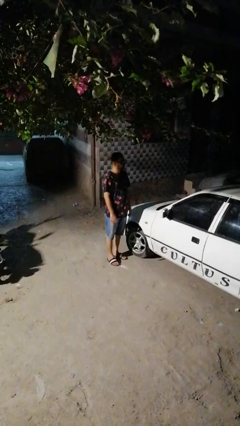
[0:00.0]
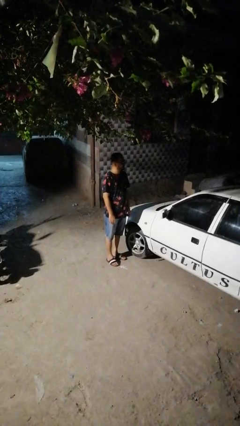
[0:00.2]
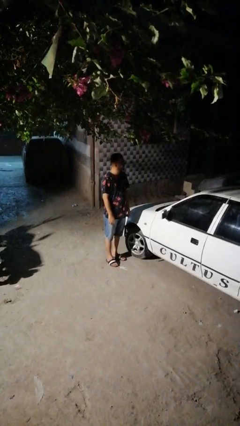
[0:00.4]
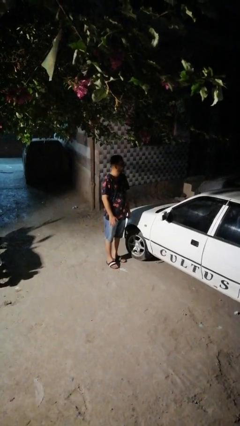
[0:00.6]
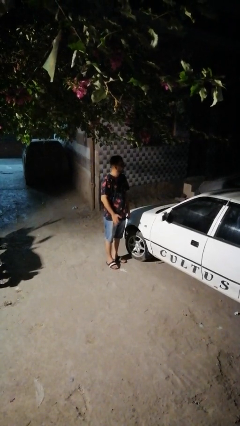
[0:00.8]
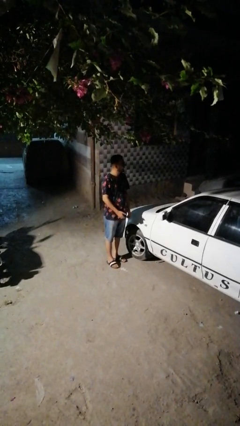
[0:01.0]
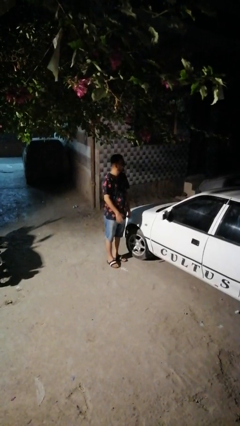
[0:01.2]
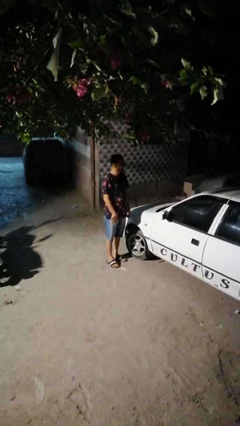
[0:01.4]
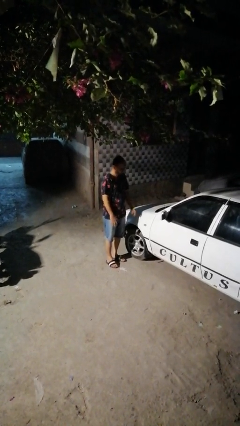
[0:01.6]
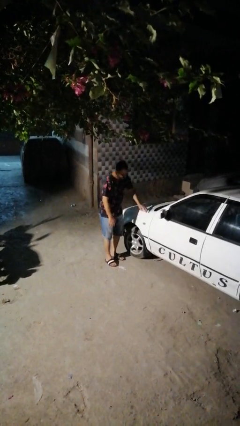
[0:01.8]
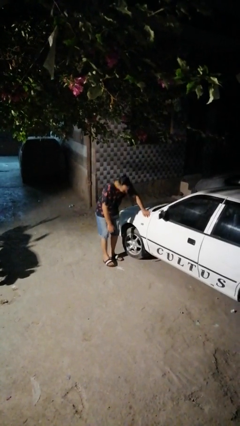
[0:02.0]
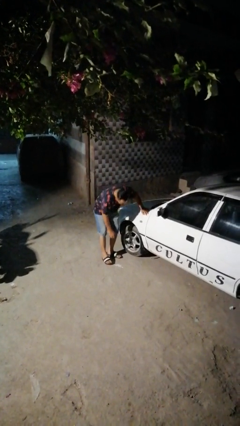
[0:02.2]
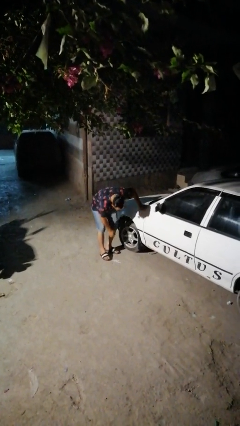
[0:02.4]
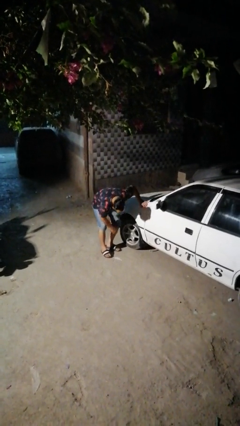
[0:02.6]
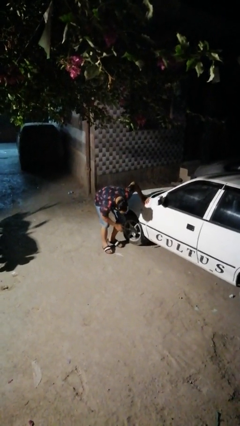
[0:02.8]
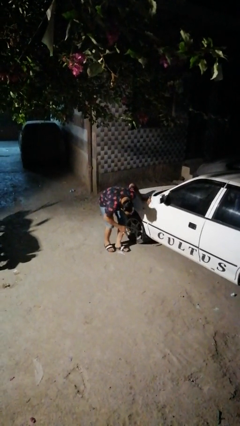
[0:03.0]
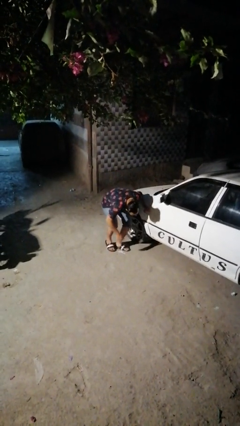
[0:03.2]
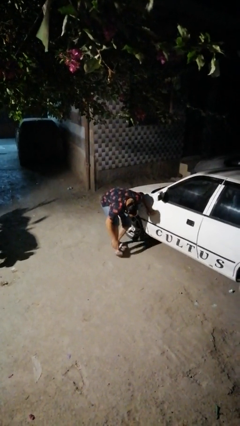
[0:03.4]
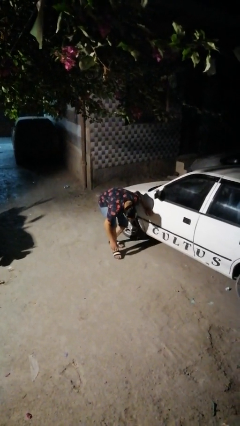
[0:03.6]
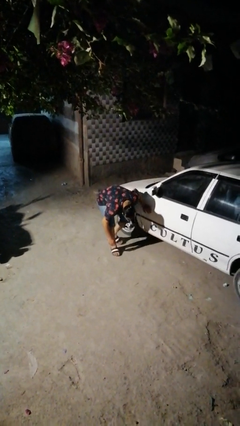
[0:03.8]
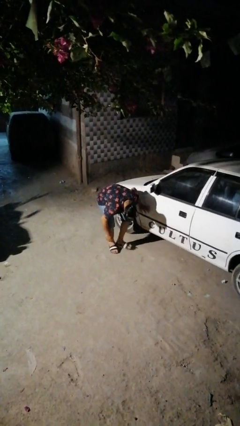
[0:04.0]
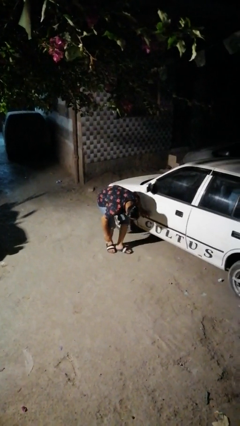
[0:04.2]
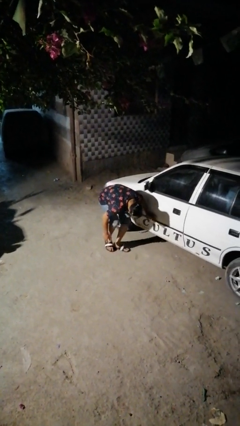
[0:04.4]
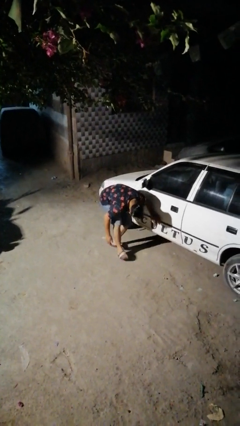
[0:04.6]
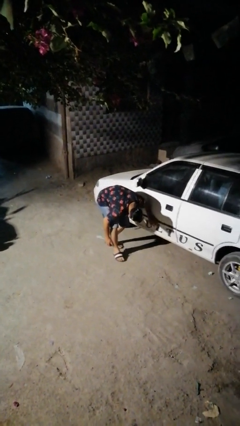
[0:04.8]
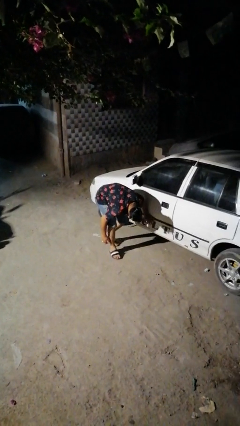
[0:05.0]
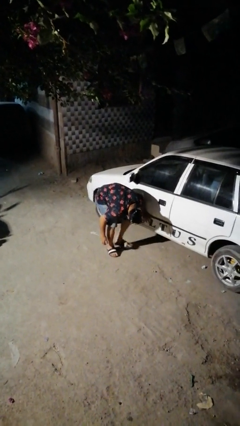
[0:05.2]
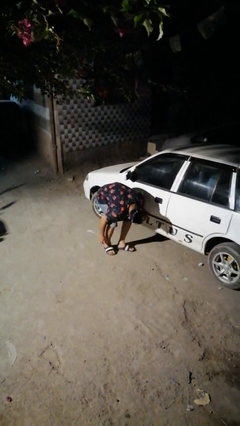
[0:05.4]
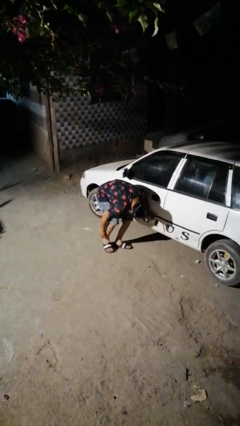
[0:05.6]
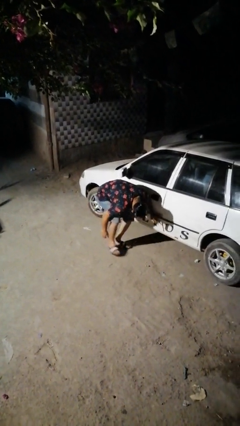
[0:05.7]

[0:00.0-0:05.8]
person crawls out from under vehicle

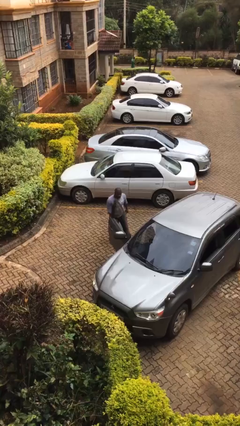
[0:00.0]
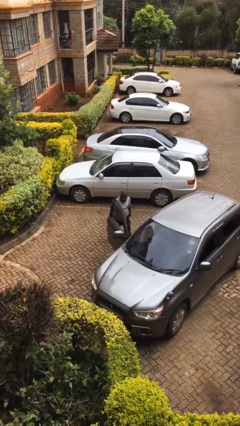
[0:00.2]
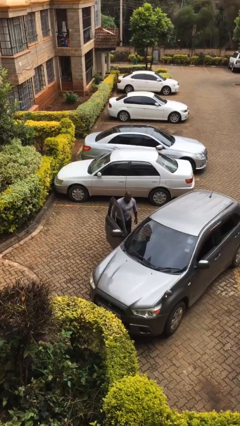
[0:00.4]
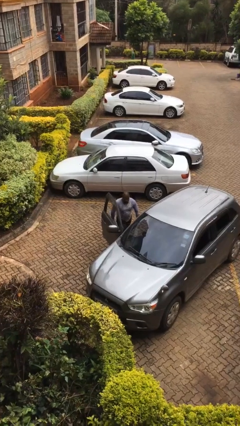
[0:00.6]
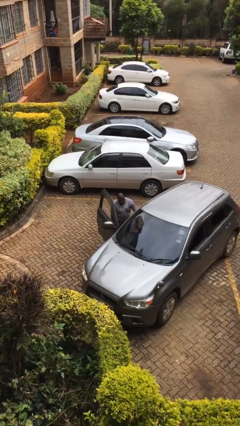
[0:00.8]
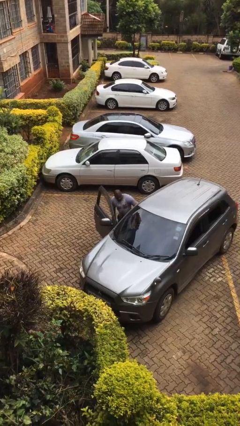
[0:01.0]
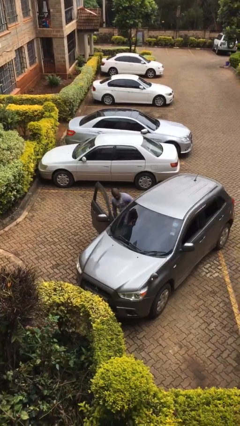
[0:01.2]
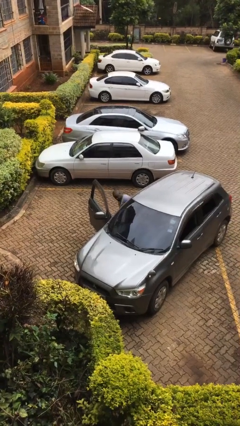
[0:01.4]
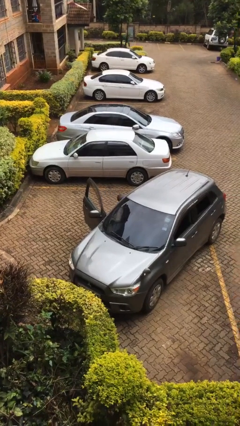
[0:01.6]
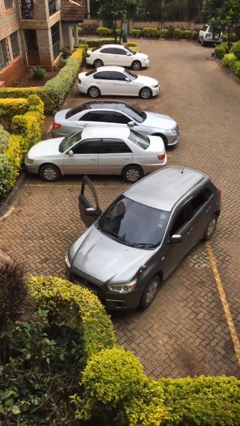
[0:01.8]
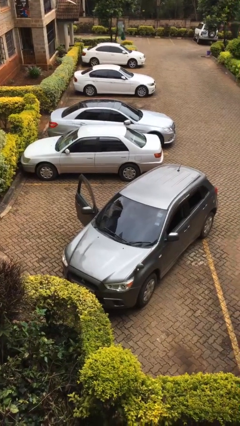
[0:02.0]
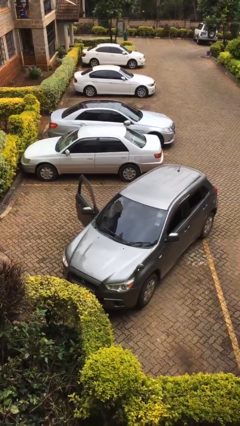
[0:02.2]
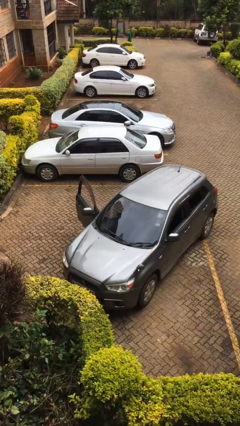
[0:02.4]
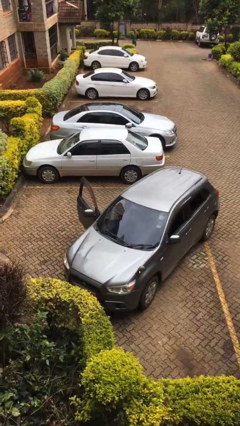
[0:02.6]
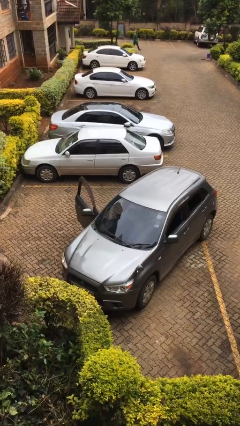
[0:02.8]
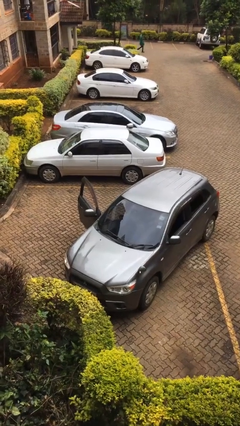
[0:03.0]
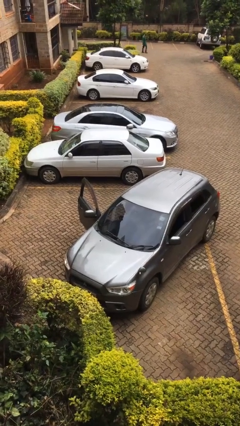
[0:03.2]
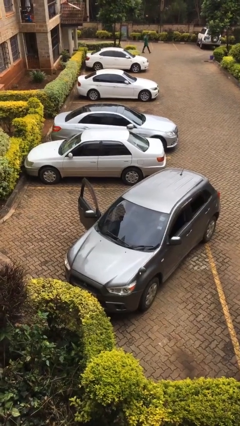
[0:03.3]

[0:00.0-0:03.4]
person enters car

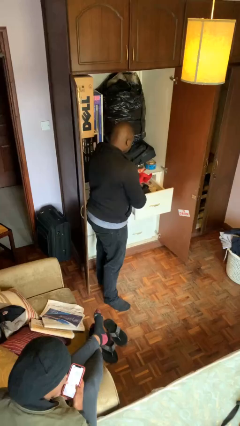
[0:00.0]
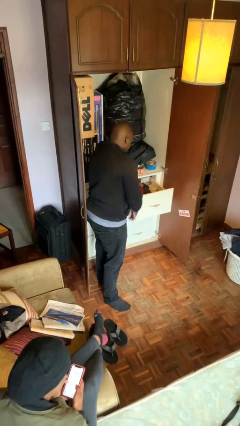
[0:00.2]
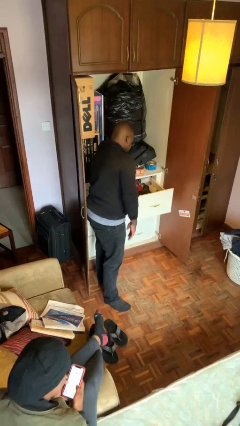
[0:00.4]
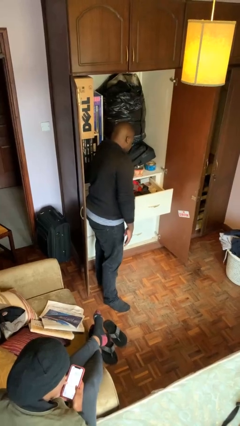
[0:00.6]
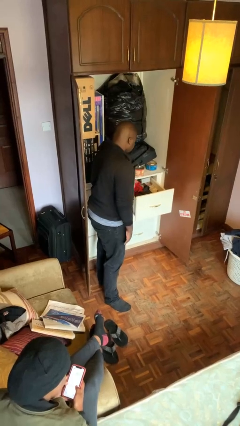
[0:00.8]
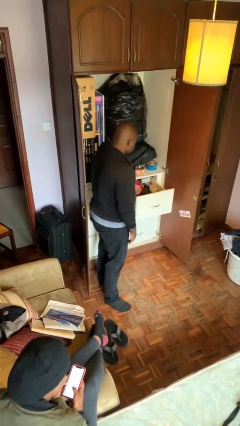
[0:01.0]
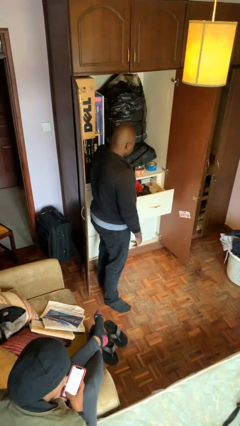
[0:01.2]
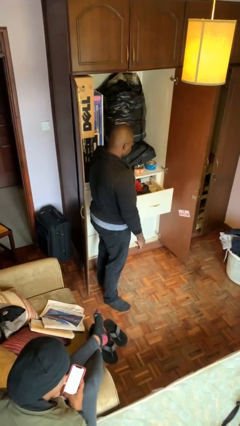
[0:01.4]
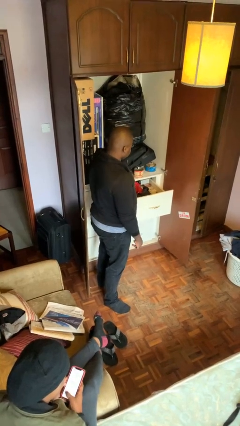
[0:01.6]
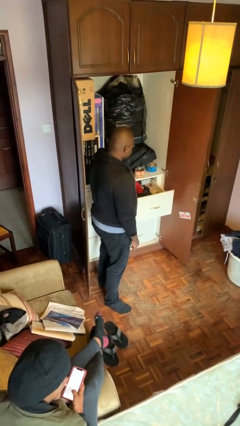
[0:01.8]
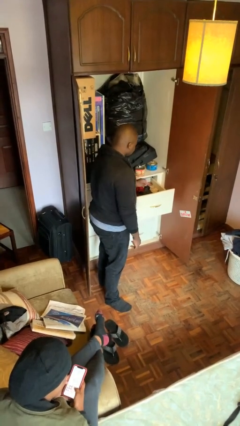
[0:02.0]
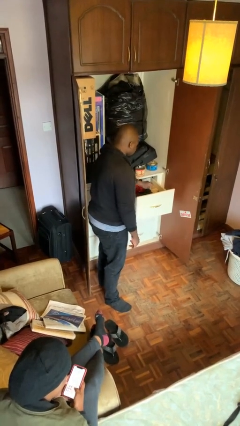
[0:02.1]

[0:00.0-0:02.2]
person puts clothes into dresser

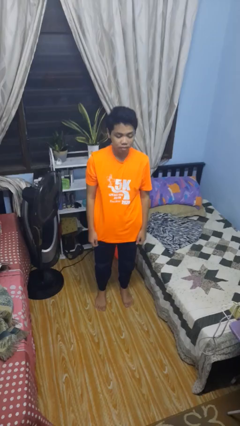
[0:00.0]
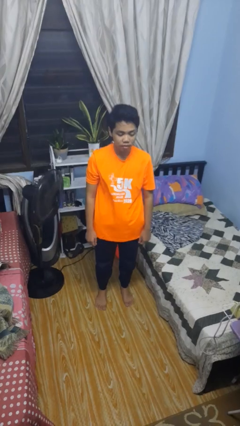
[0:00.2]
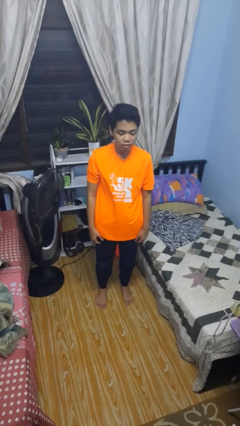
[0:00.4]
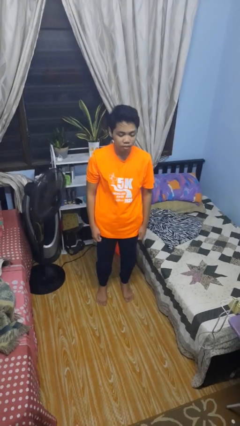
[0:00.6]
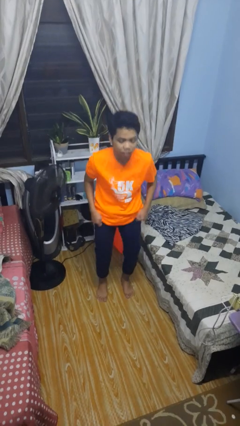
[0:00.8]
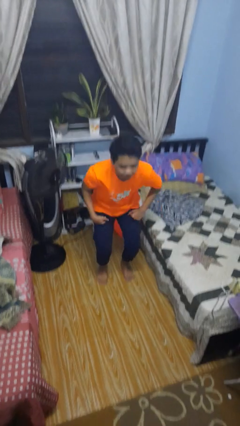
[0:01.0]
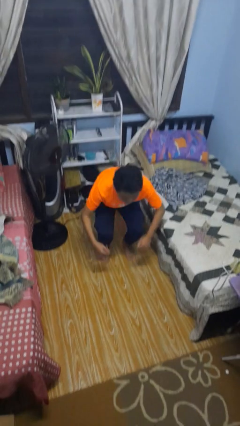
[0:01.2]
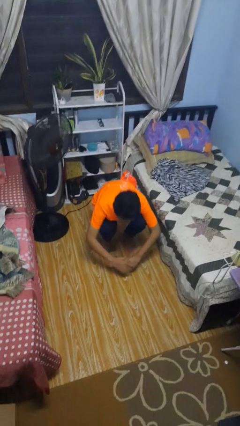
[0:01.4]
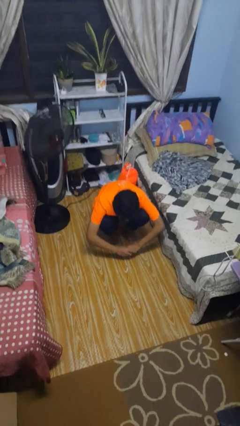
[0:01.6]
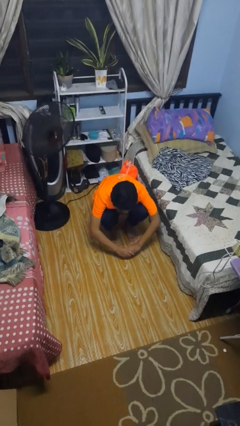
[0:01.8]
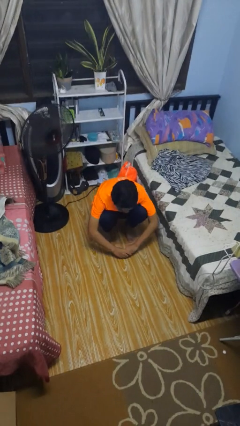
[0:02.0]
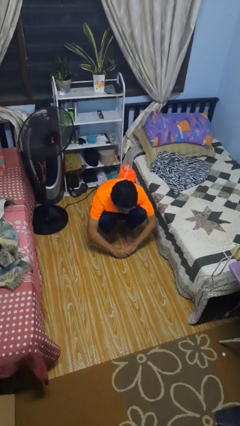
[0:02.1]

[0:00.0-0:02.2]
person squats

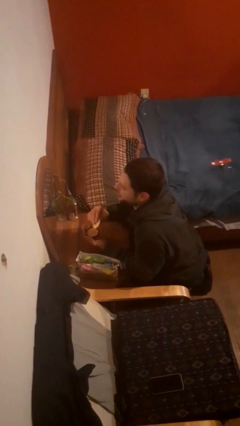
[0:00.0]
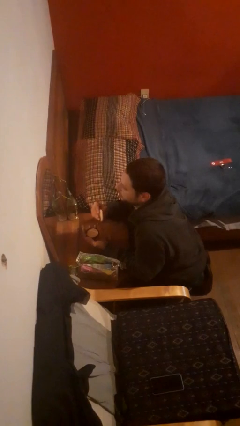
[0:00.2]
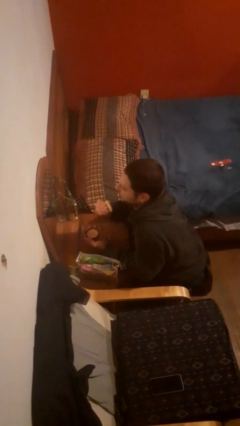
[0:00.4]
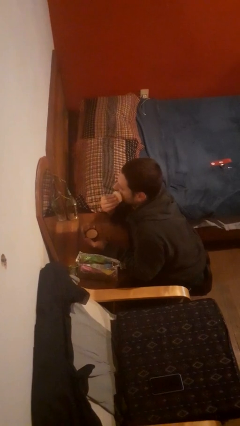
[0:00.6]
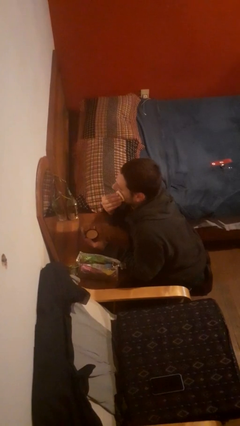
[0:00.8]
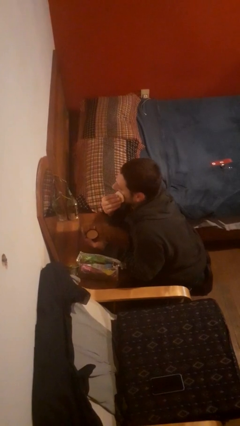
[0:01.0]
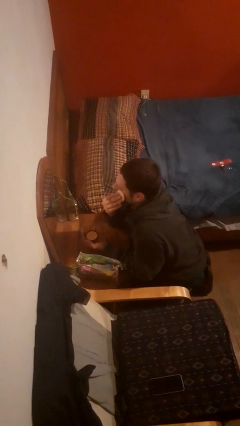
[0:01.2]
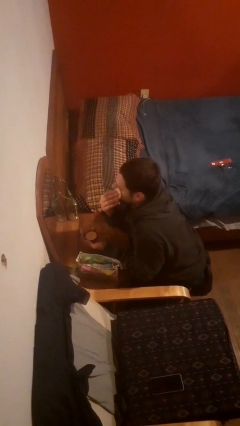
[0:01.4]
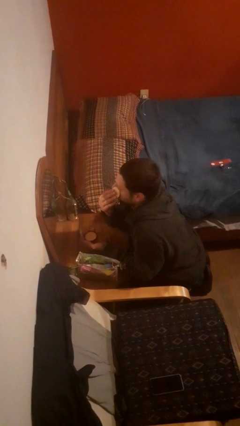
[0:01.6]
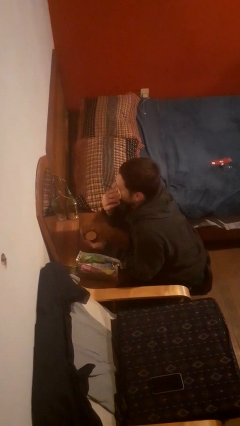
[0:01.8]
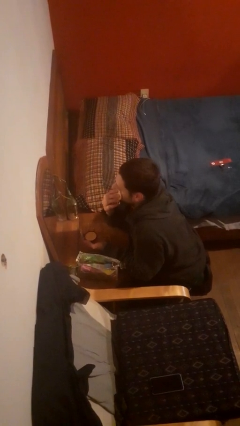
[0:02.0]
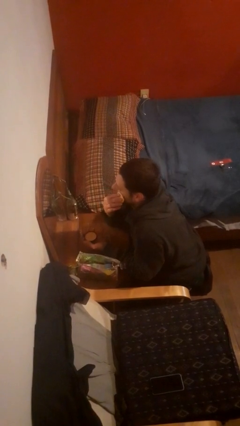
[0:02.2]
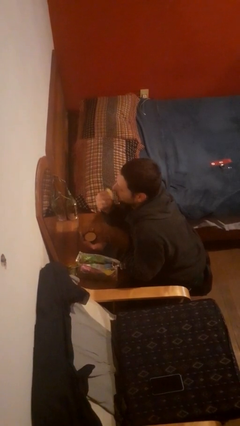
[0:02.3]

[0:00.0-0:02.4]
person applies foundation makeup

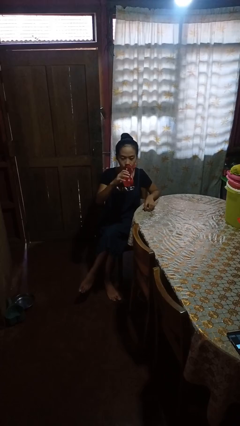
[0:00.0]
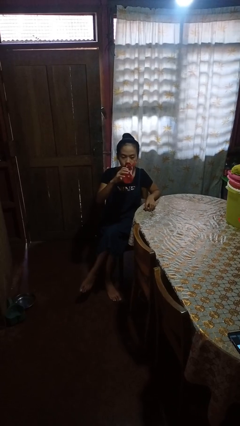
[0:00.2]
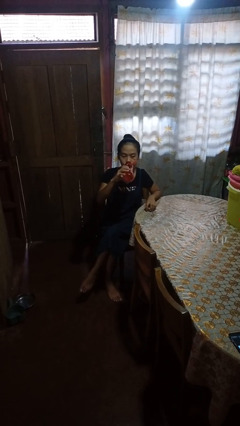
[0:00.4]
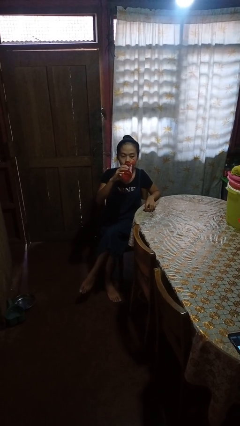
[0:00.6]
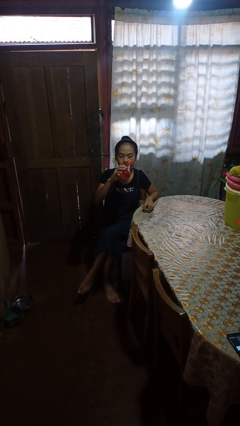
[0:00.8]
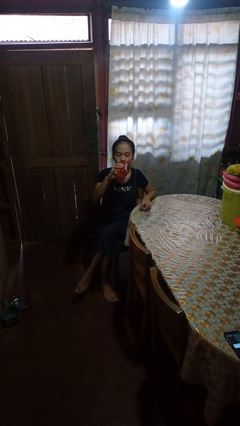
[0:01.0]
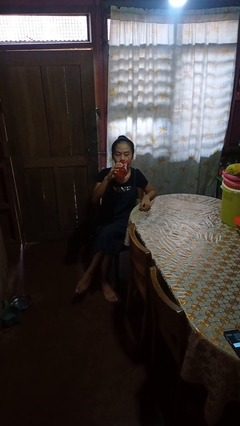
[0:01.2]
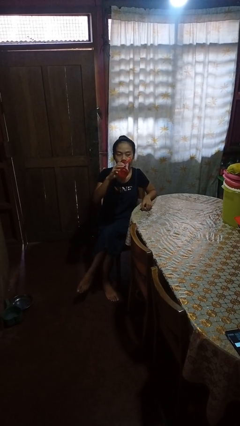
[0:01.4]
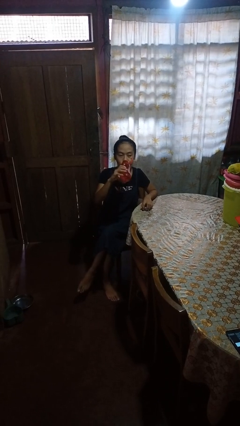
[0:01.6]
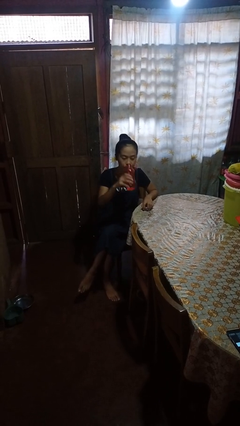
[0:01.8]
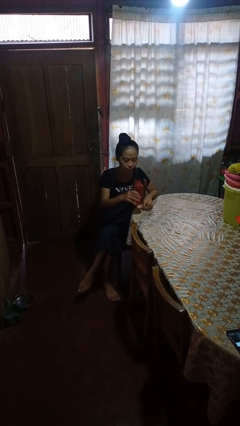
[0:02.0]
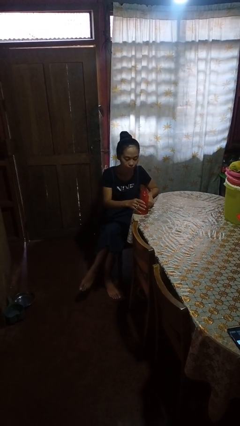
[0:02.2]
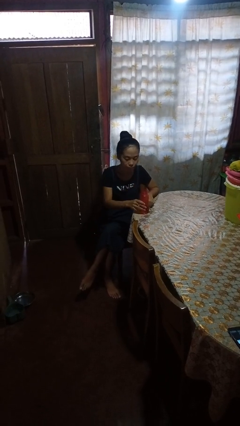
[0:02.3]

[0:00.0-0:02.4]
person drinks from bottle
